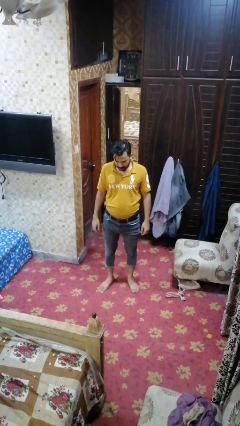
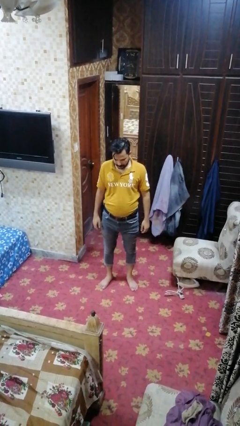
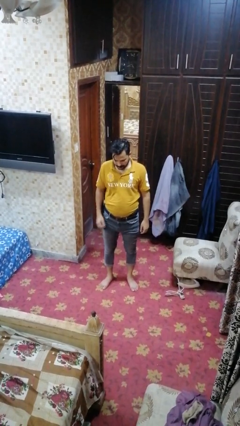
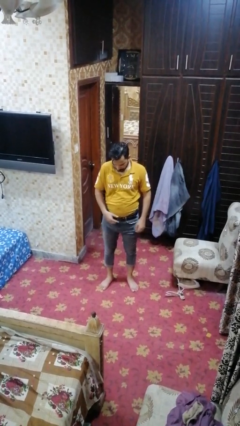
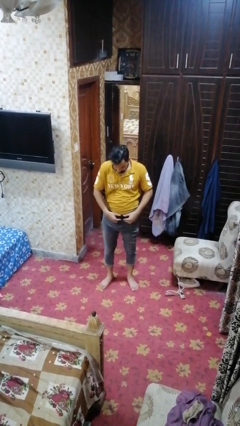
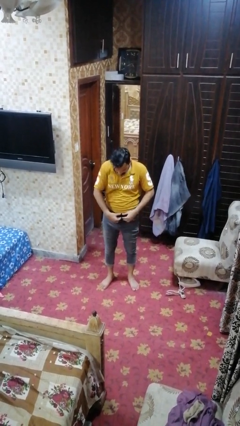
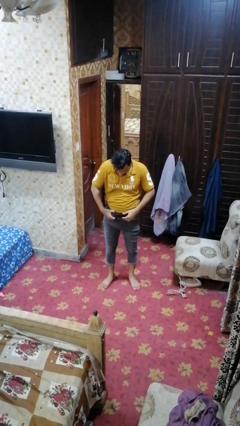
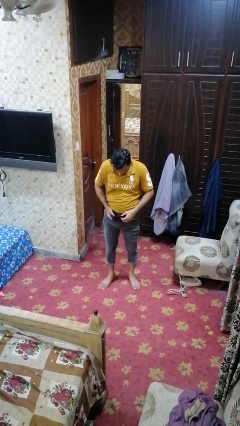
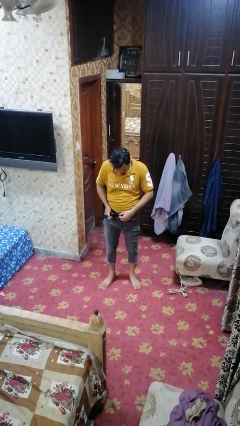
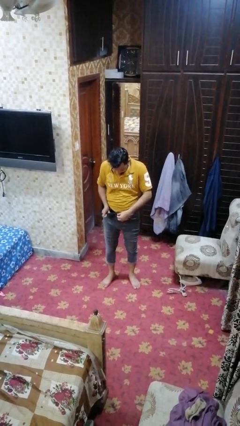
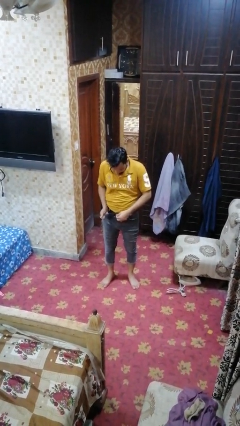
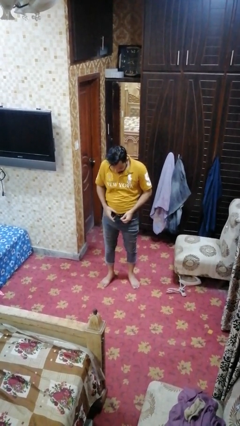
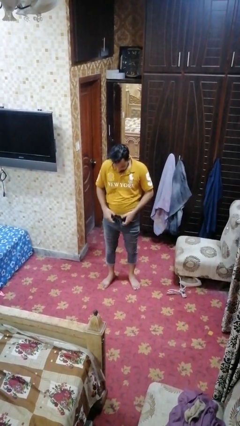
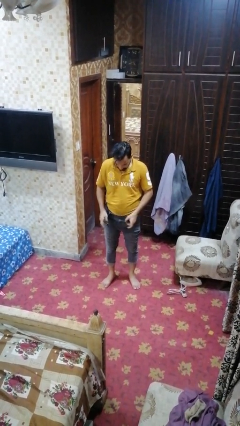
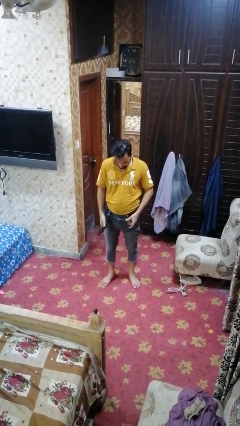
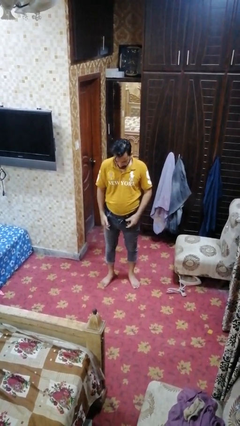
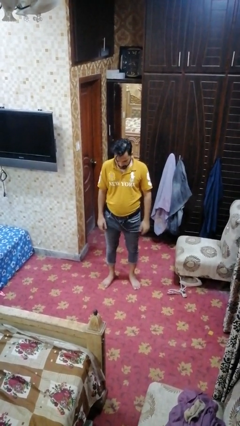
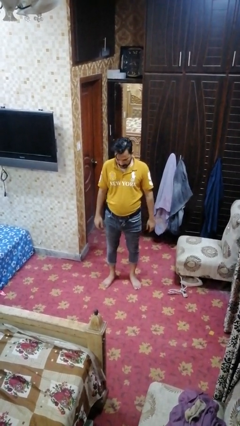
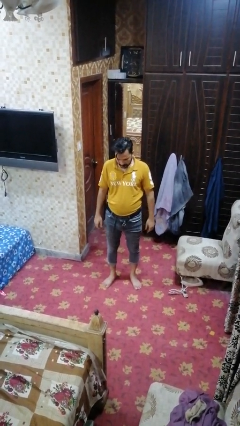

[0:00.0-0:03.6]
person takes off belt

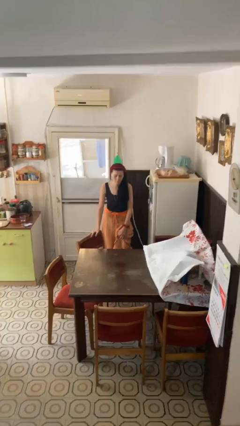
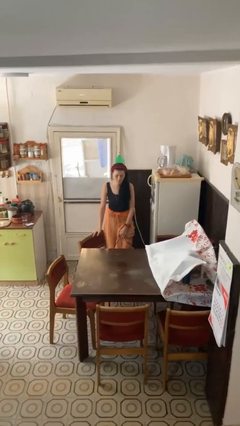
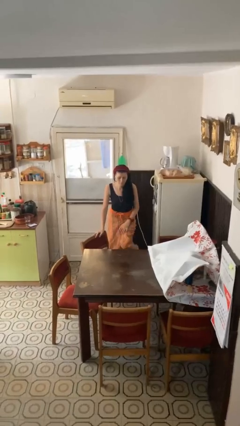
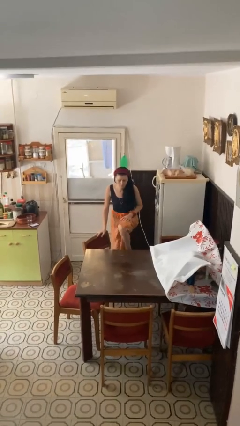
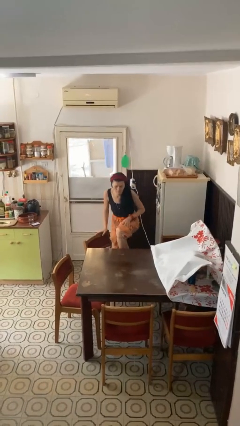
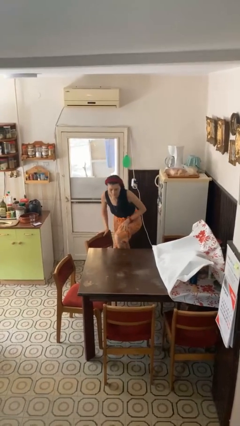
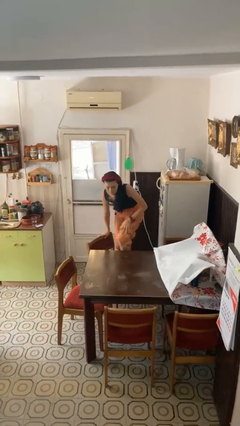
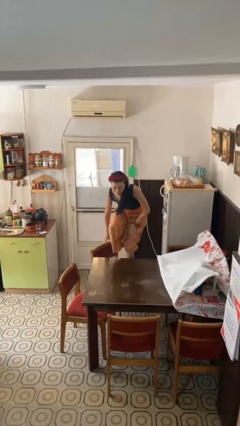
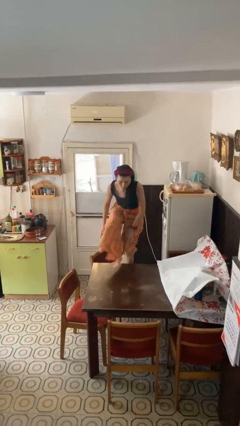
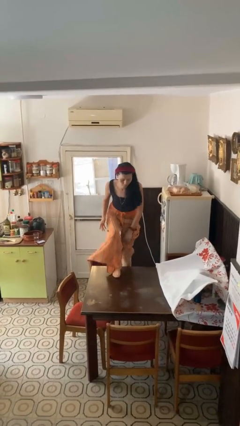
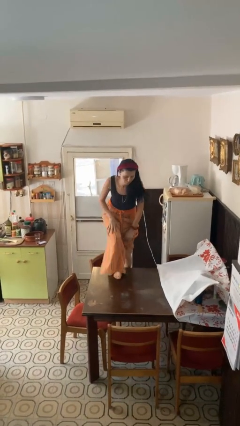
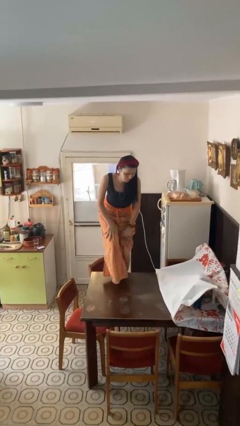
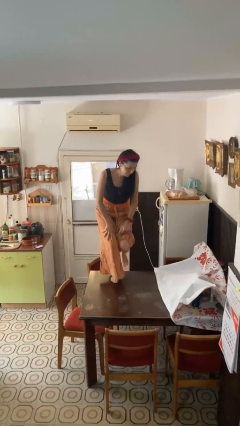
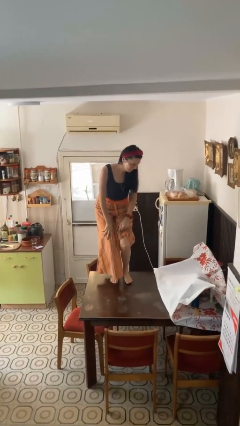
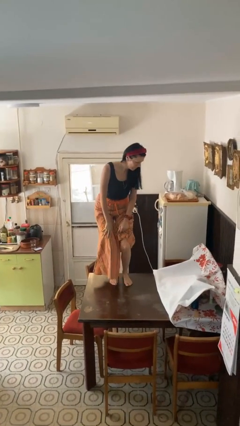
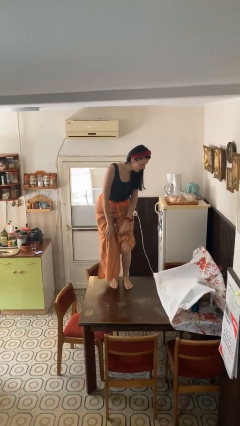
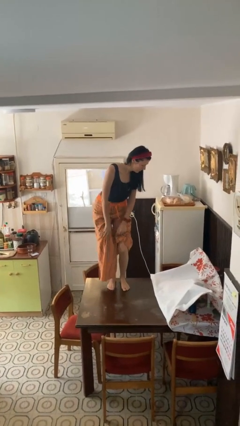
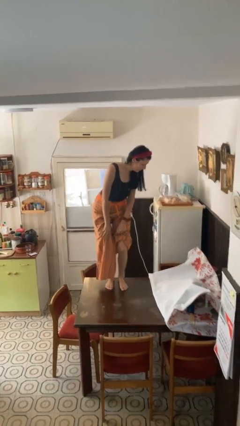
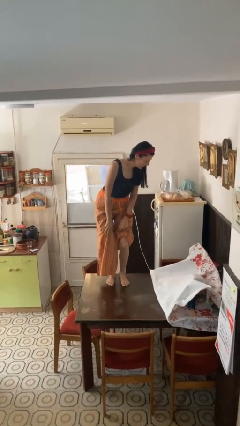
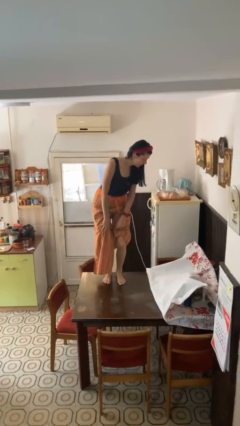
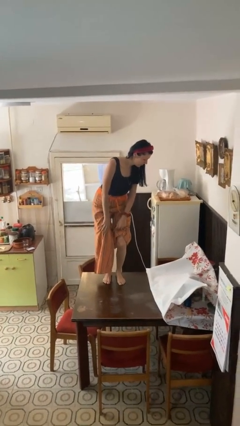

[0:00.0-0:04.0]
person climbs on table

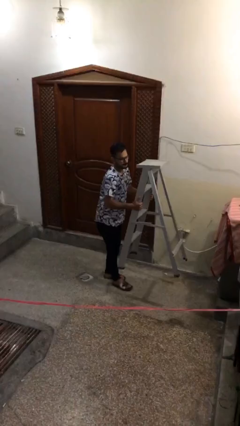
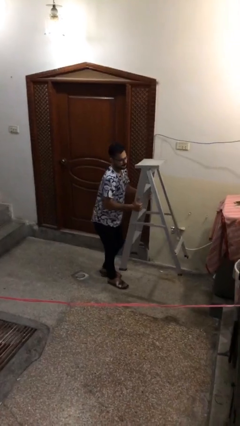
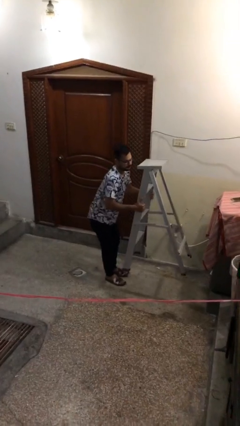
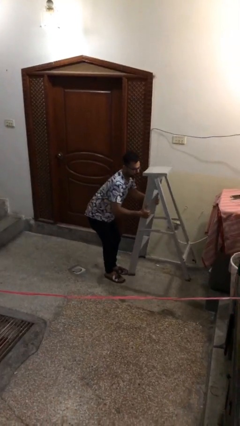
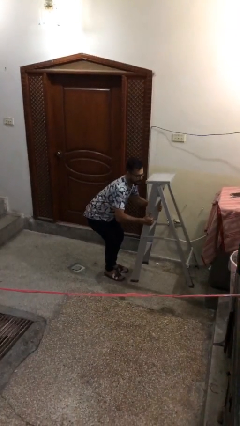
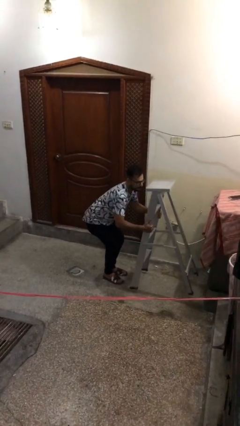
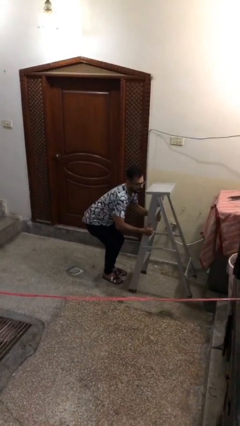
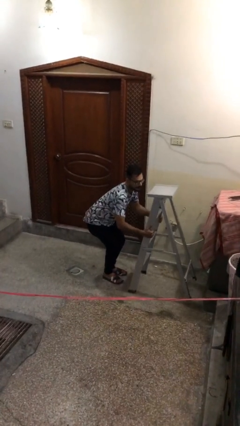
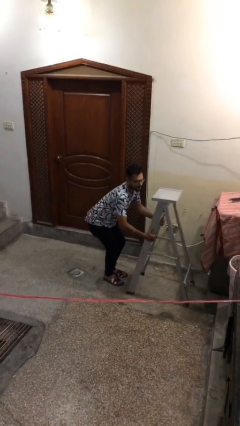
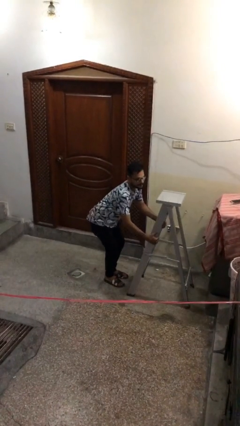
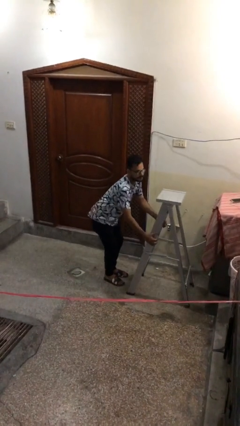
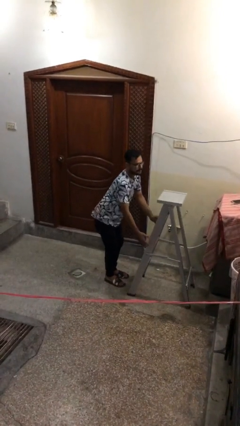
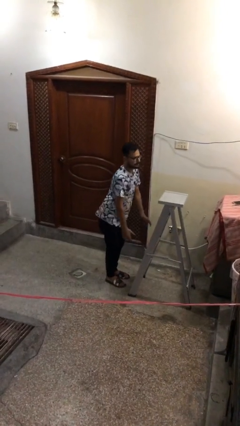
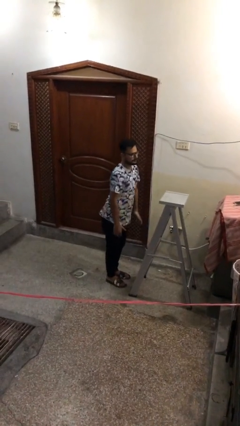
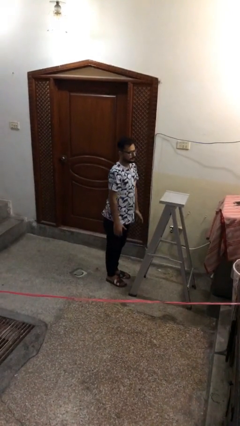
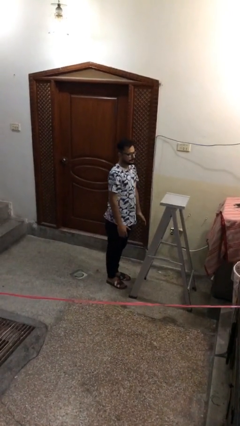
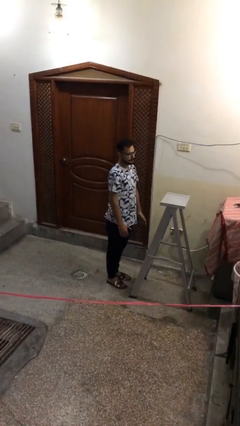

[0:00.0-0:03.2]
person puts down object on floor

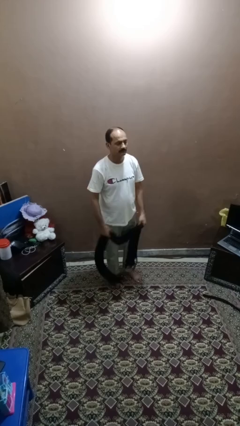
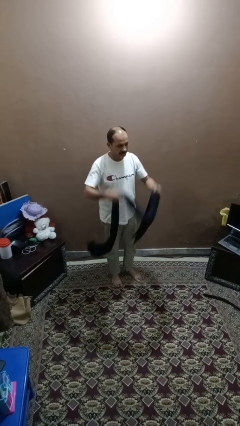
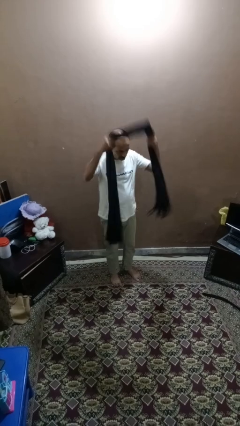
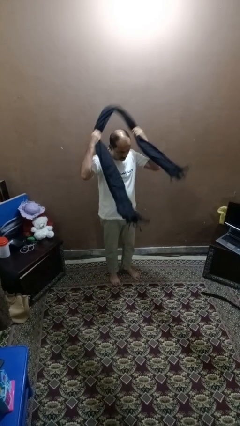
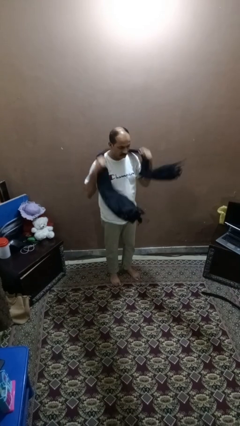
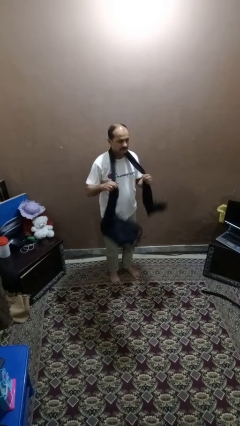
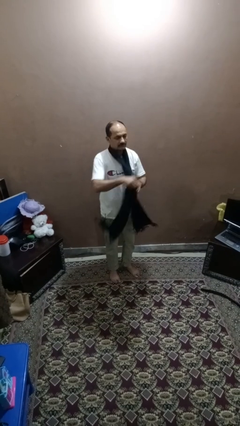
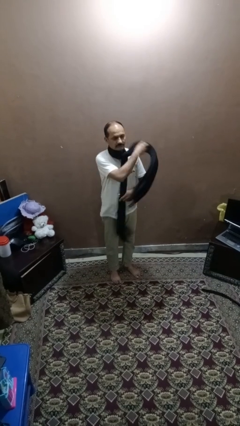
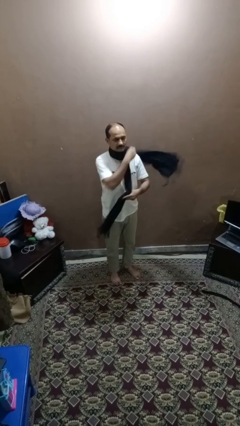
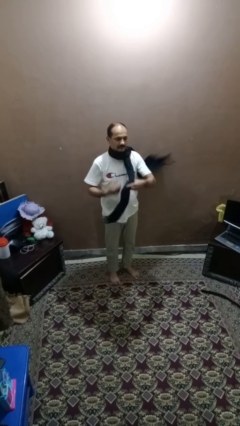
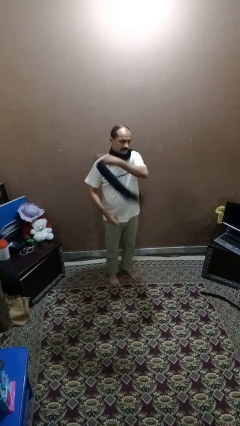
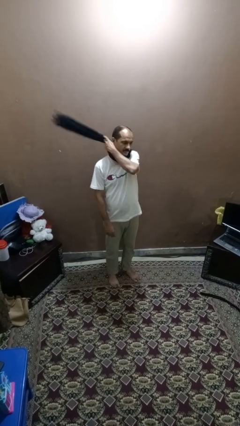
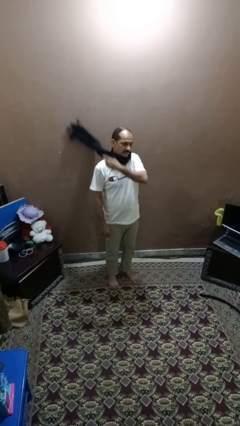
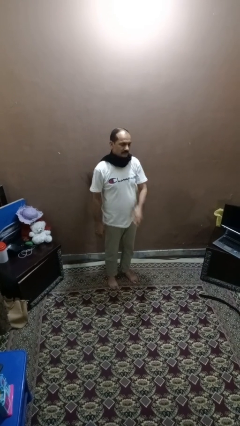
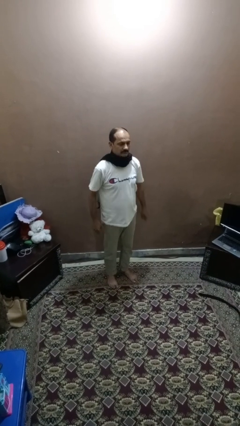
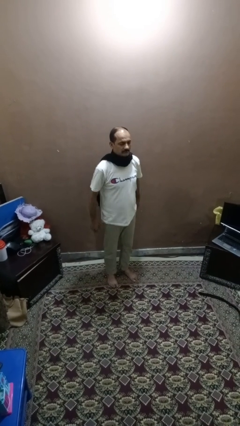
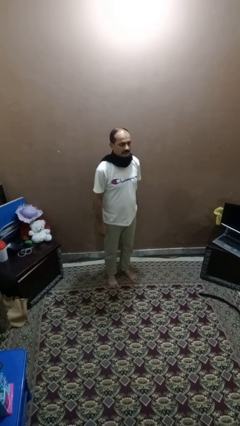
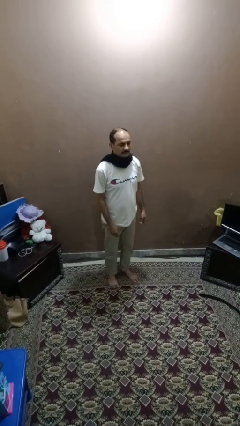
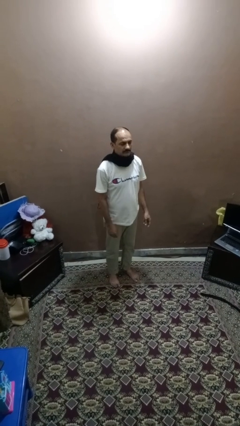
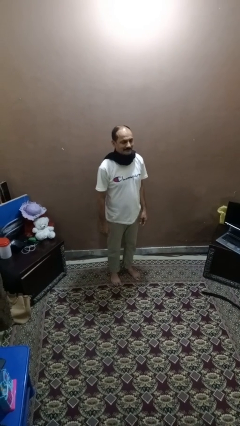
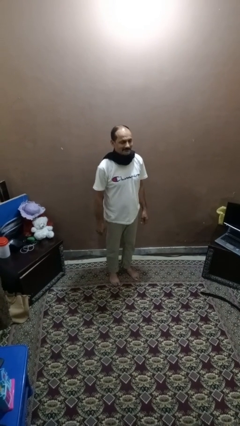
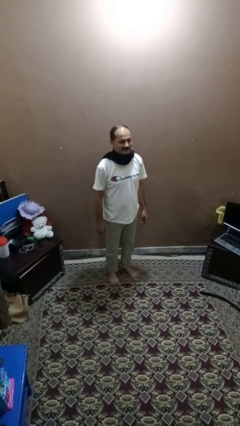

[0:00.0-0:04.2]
person puts on scarf

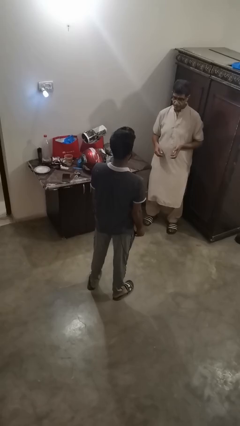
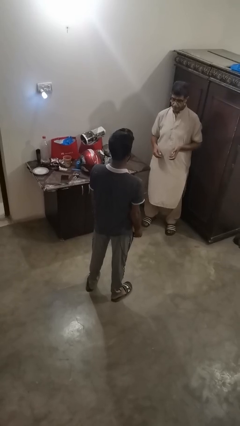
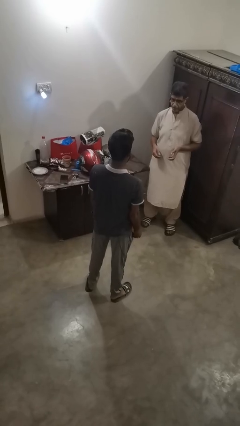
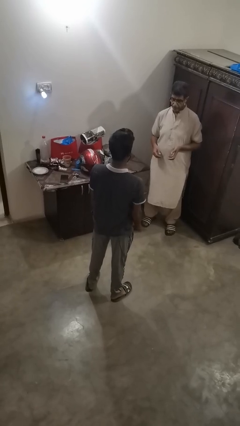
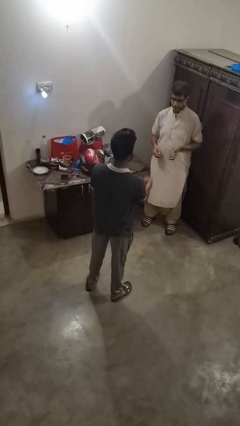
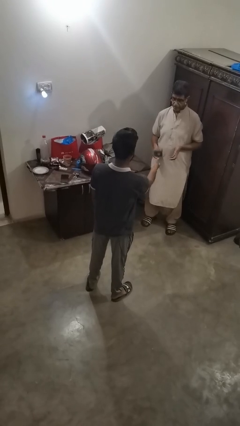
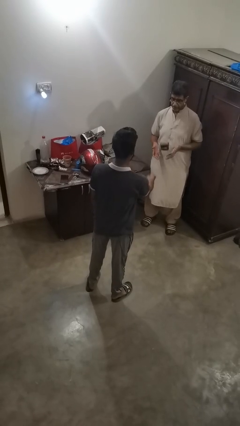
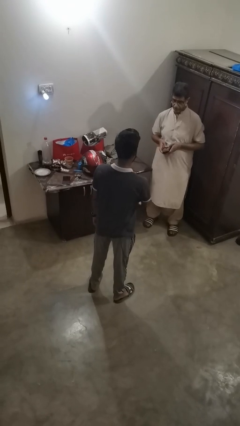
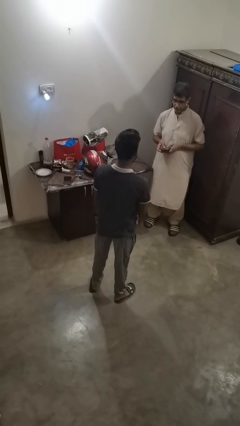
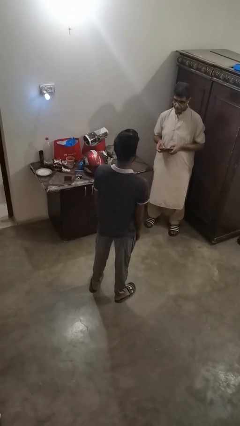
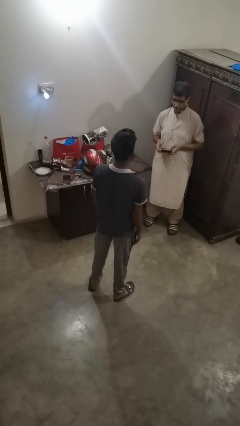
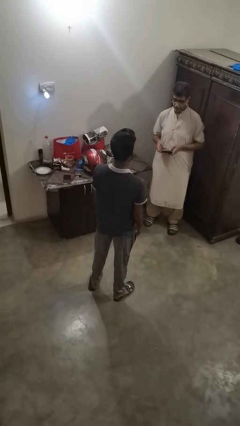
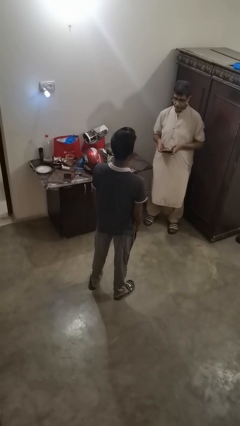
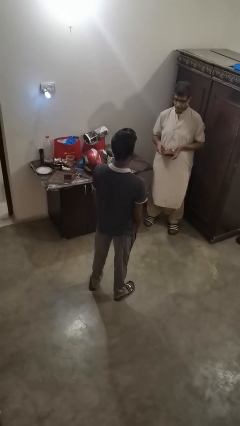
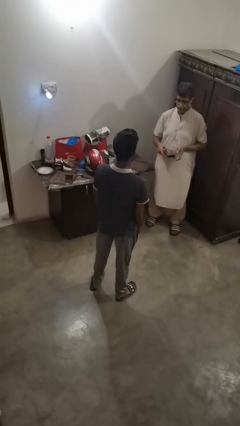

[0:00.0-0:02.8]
person throws object to person
